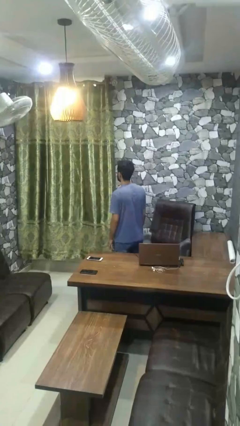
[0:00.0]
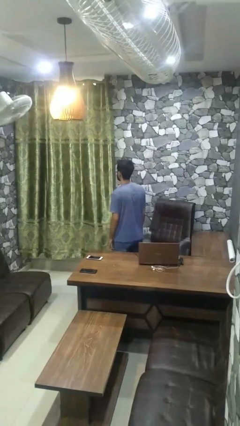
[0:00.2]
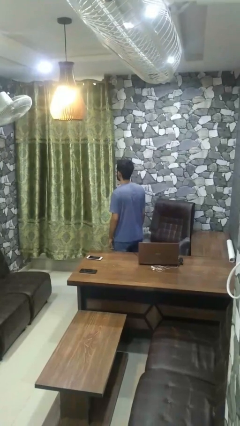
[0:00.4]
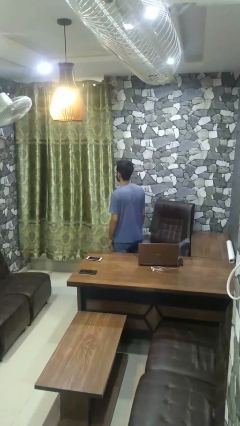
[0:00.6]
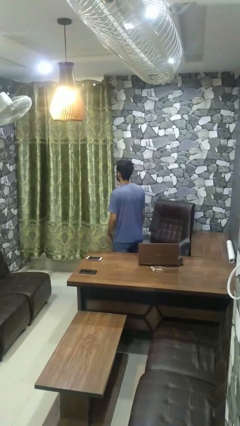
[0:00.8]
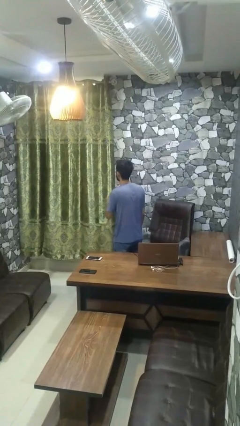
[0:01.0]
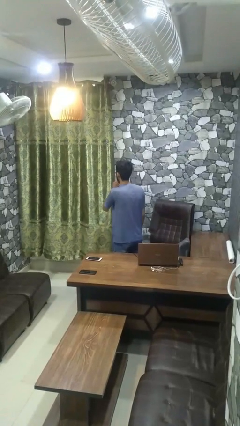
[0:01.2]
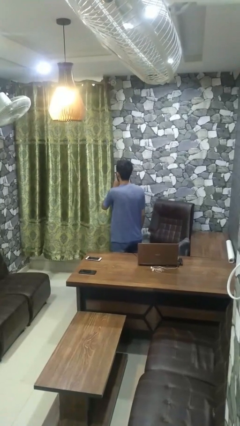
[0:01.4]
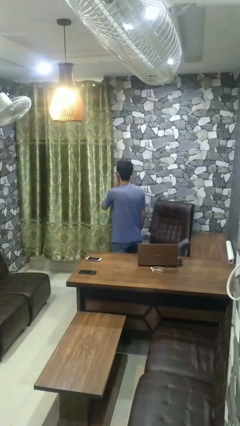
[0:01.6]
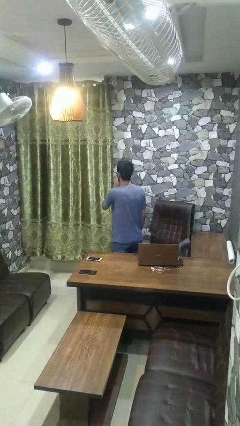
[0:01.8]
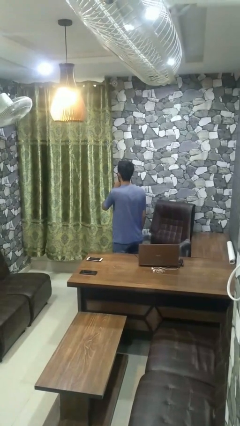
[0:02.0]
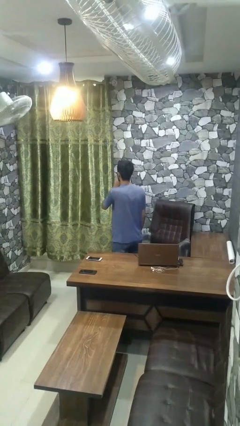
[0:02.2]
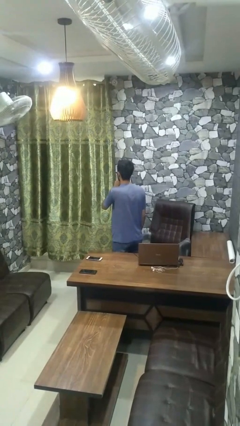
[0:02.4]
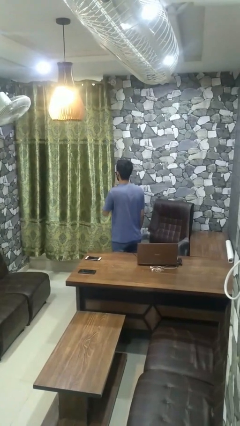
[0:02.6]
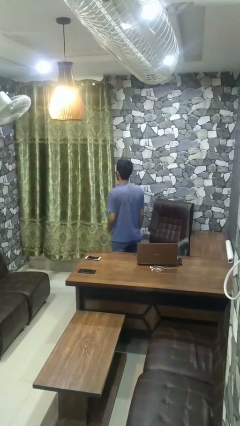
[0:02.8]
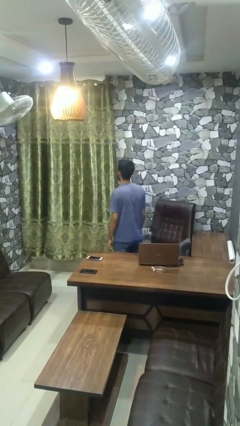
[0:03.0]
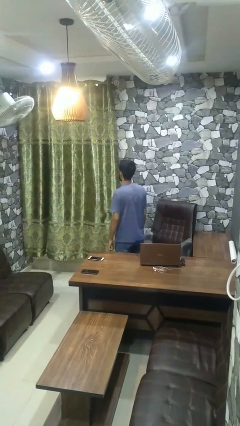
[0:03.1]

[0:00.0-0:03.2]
person gestures be quiet

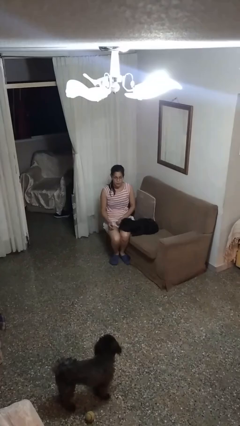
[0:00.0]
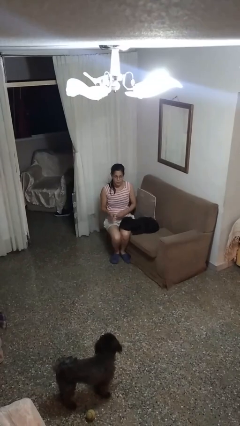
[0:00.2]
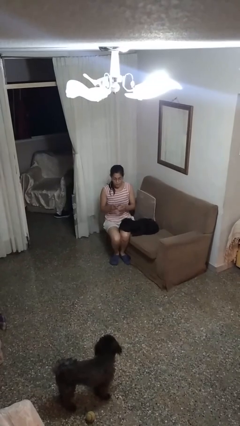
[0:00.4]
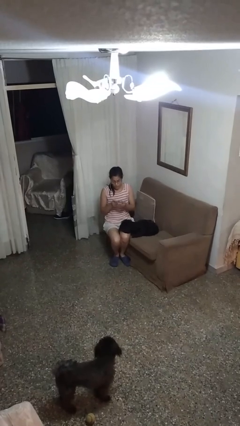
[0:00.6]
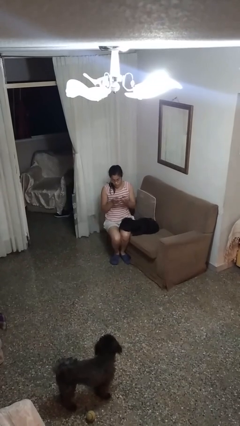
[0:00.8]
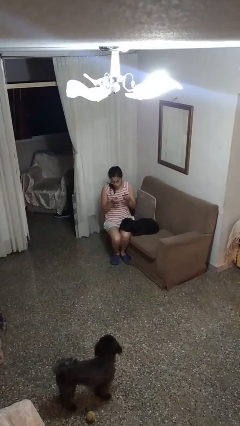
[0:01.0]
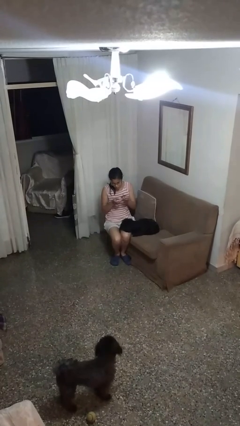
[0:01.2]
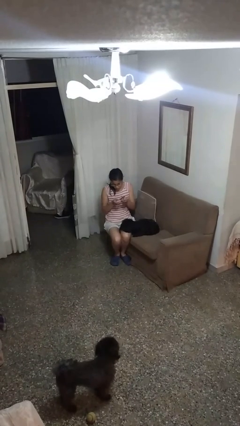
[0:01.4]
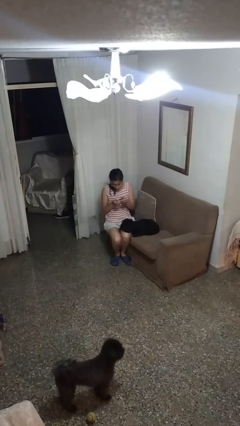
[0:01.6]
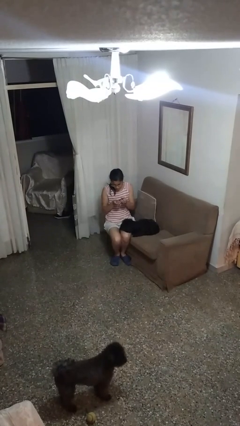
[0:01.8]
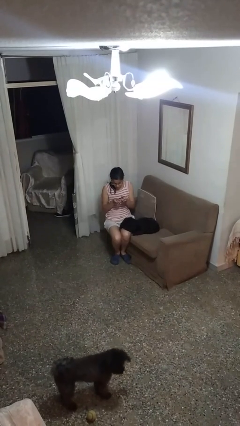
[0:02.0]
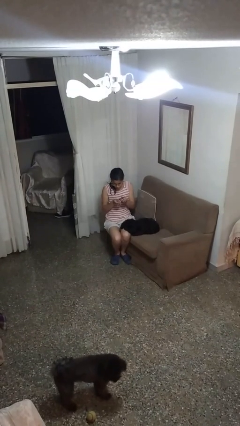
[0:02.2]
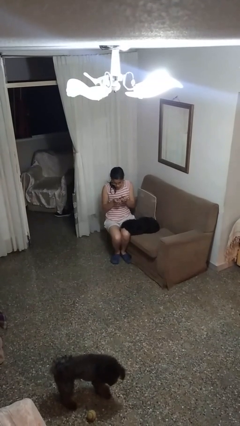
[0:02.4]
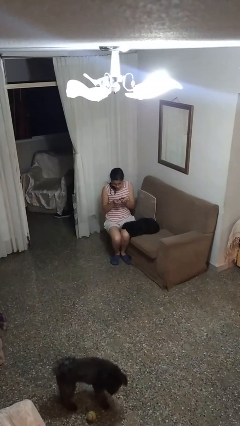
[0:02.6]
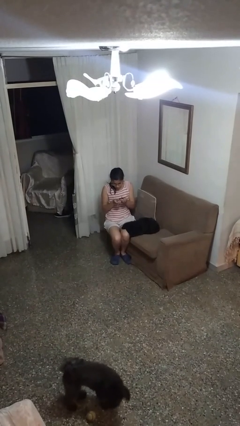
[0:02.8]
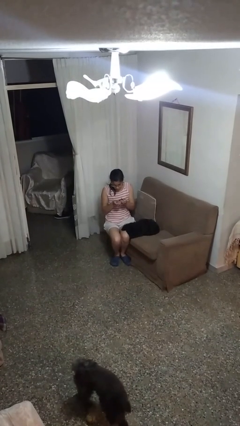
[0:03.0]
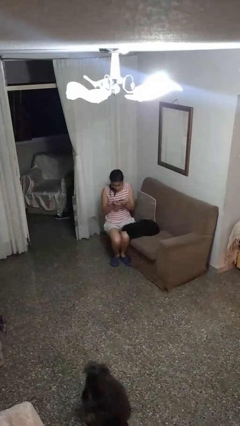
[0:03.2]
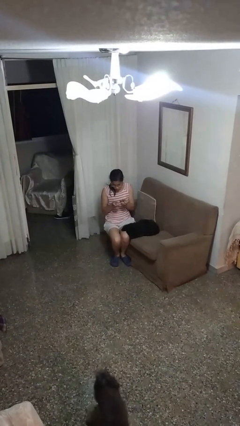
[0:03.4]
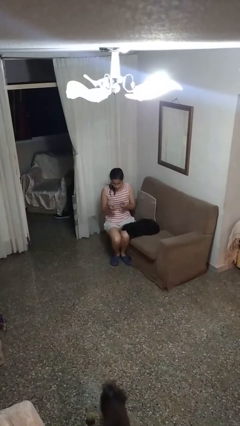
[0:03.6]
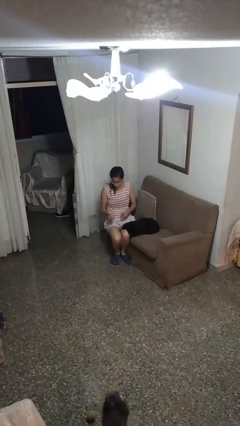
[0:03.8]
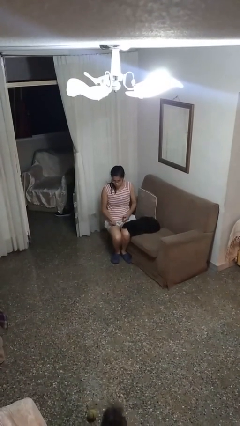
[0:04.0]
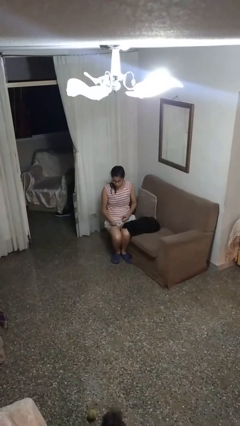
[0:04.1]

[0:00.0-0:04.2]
person clips fingernails

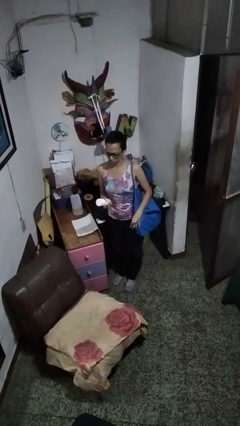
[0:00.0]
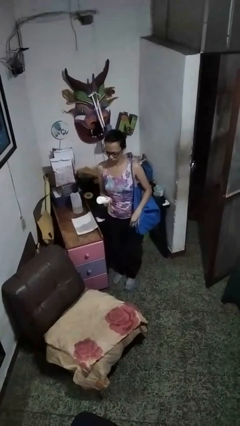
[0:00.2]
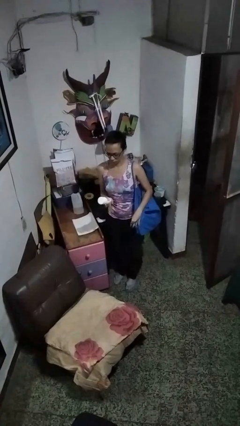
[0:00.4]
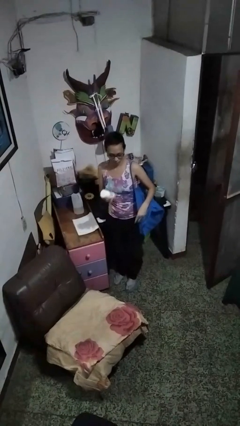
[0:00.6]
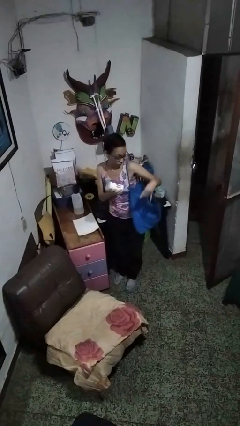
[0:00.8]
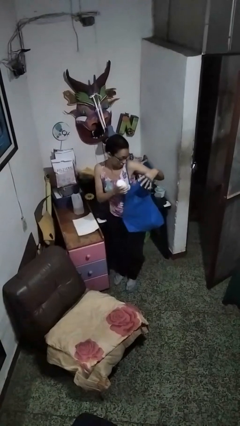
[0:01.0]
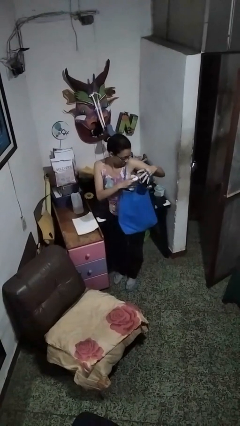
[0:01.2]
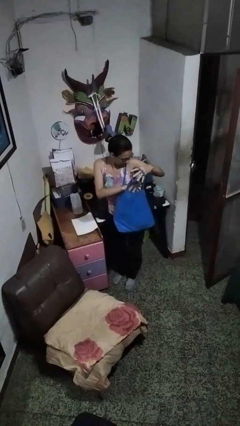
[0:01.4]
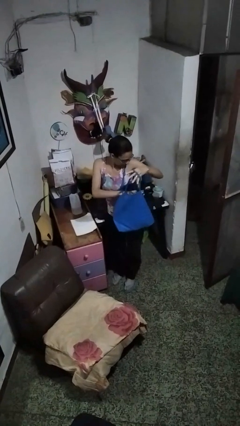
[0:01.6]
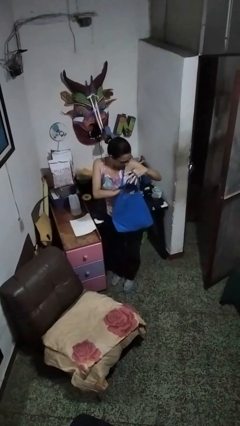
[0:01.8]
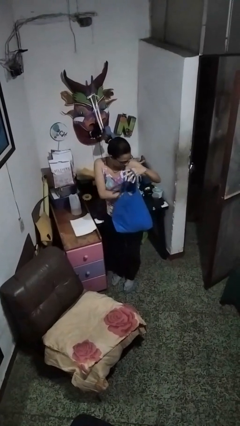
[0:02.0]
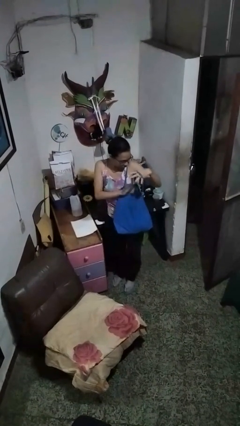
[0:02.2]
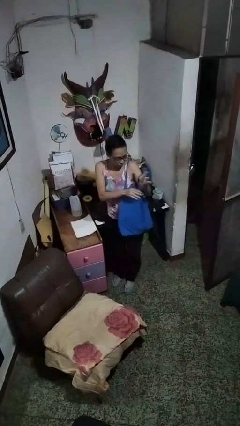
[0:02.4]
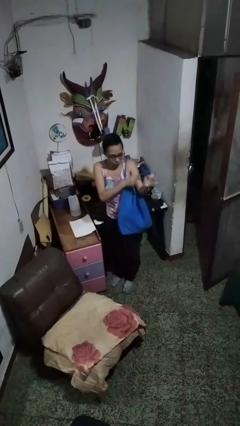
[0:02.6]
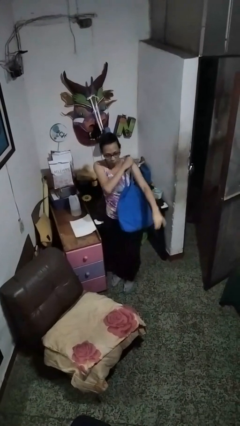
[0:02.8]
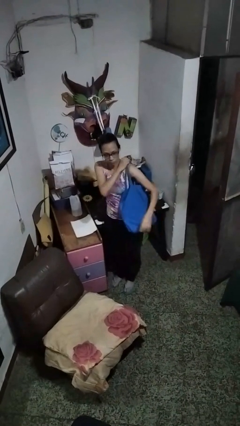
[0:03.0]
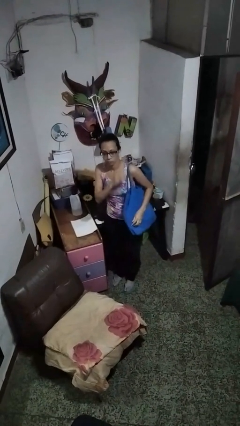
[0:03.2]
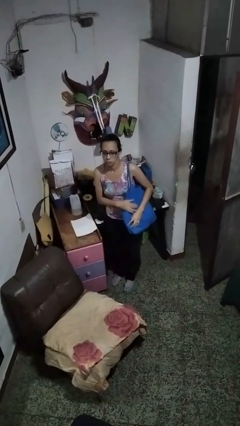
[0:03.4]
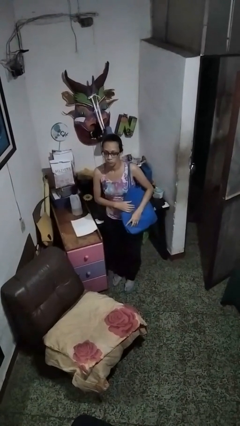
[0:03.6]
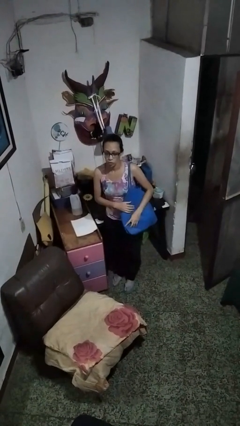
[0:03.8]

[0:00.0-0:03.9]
person puts object into bag

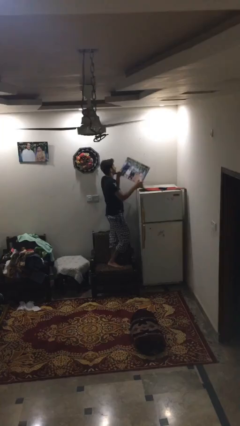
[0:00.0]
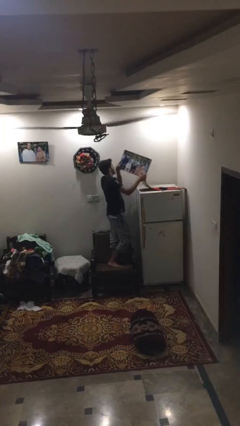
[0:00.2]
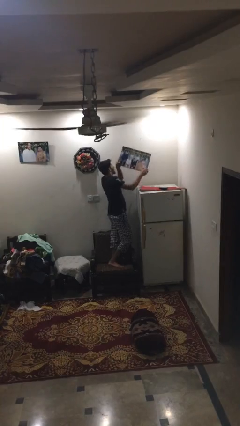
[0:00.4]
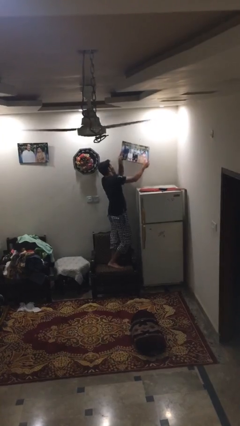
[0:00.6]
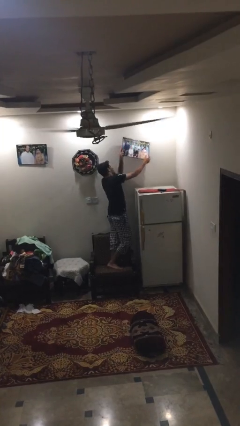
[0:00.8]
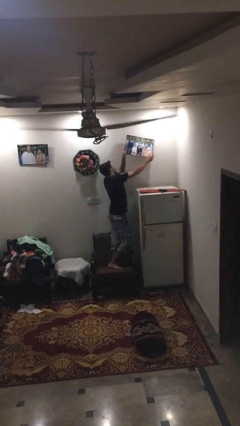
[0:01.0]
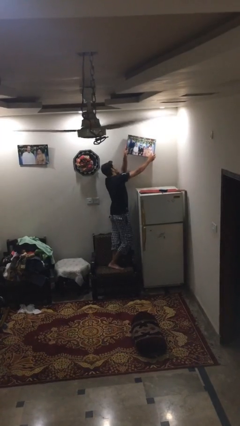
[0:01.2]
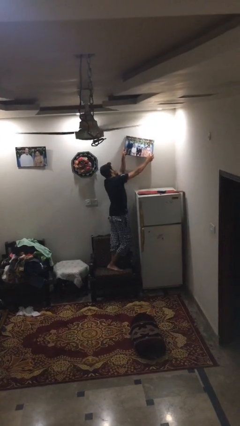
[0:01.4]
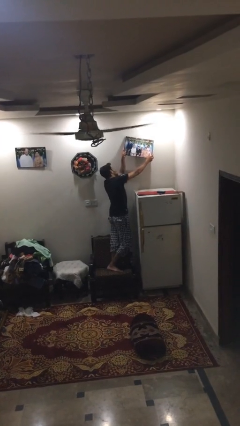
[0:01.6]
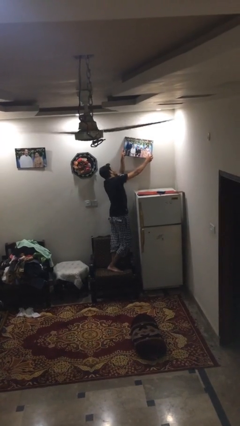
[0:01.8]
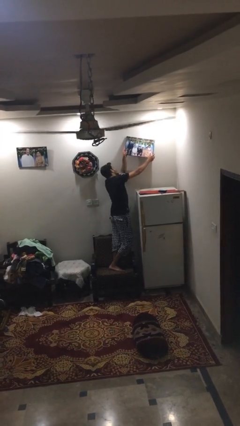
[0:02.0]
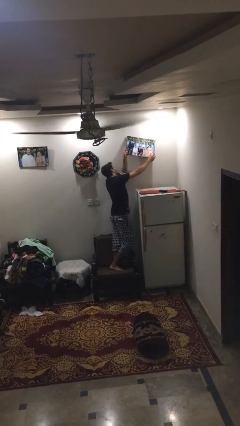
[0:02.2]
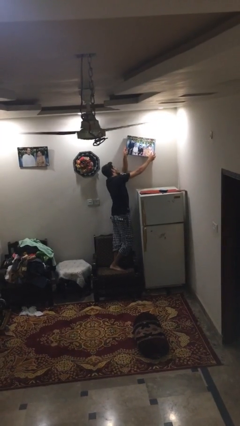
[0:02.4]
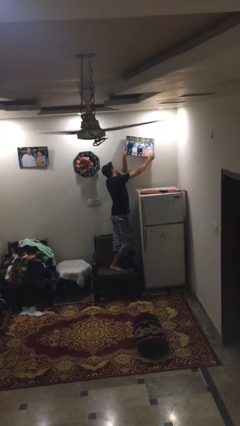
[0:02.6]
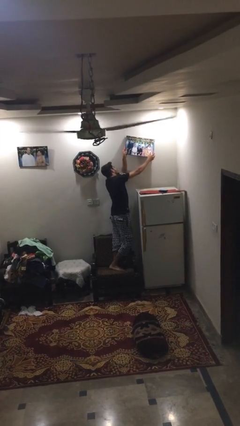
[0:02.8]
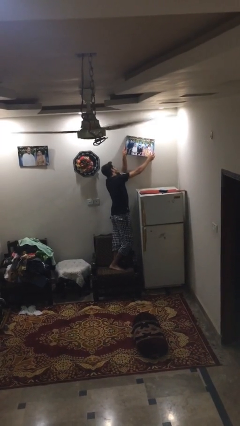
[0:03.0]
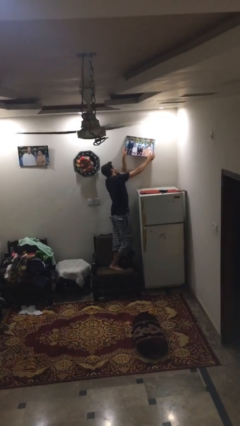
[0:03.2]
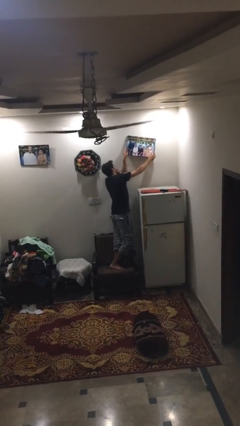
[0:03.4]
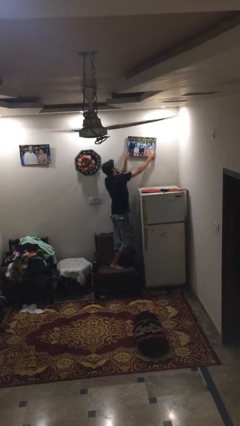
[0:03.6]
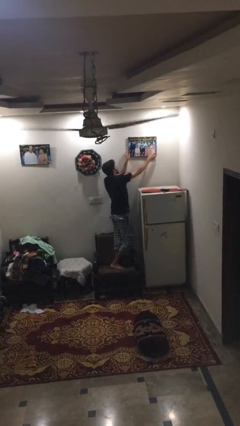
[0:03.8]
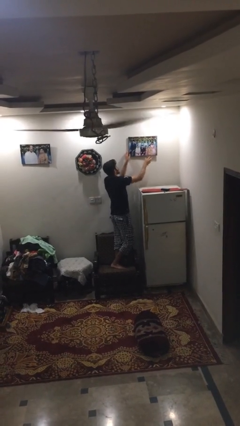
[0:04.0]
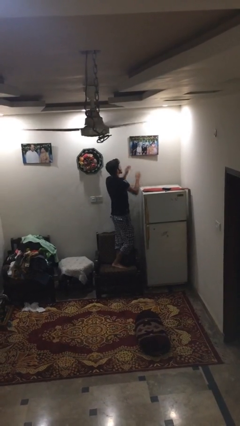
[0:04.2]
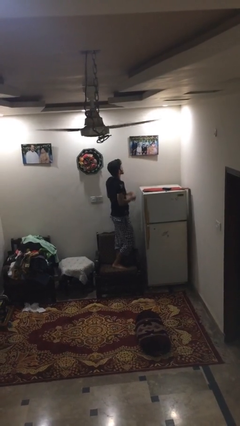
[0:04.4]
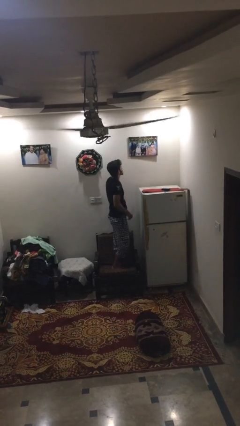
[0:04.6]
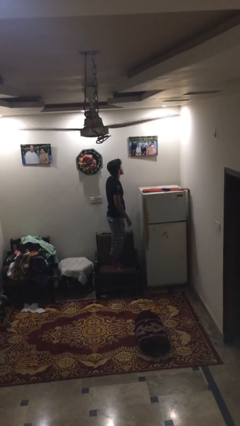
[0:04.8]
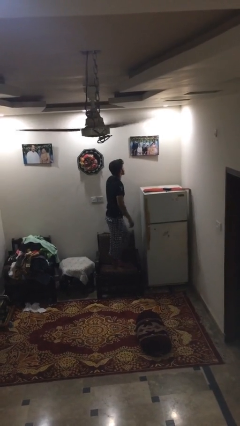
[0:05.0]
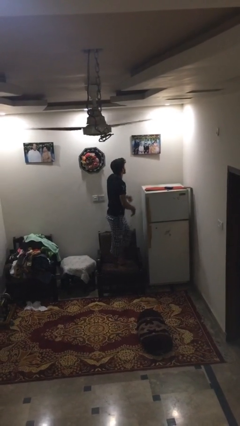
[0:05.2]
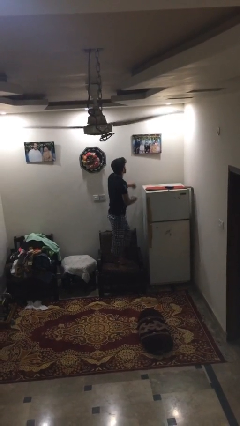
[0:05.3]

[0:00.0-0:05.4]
person puts up picture frame

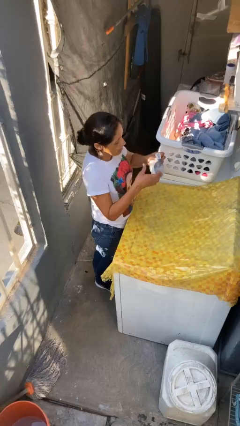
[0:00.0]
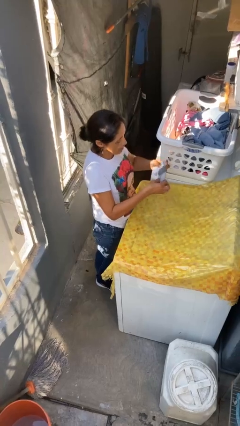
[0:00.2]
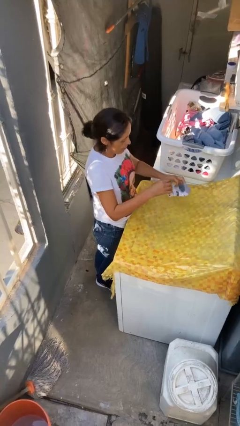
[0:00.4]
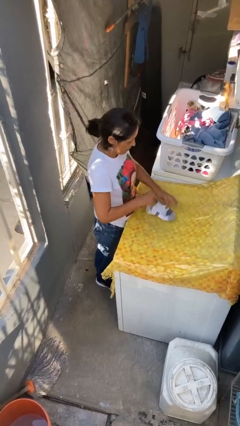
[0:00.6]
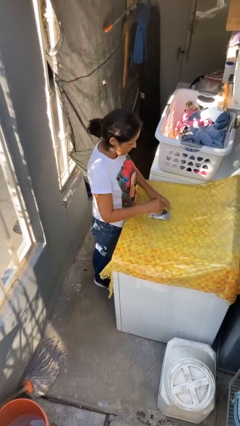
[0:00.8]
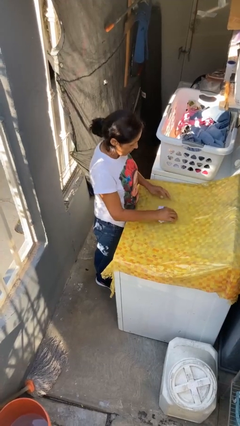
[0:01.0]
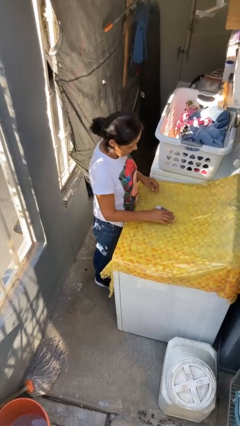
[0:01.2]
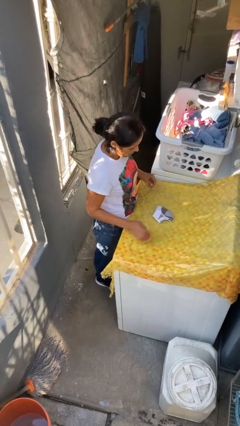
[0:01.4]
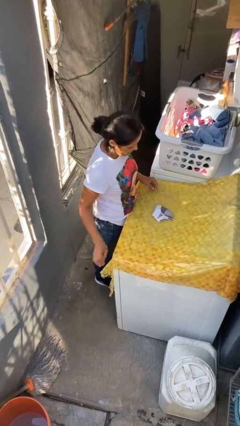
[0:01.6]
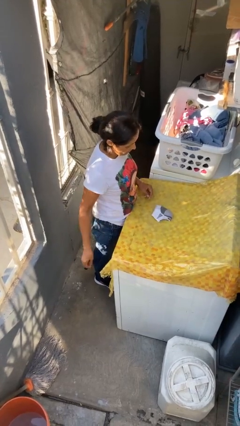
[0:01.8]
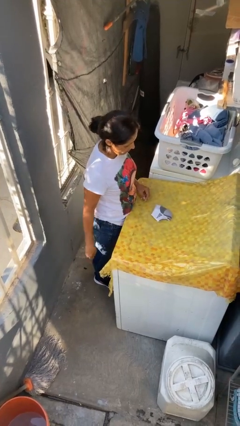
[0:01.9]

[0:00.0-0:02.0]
person folds socks
